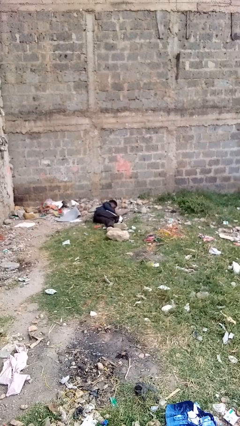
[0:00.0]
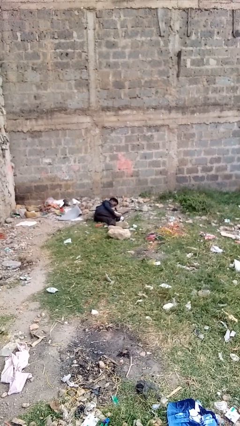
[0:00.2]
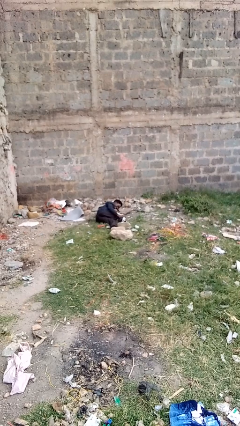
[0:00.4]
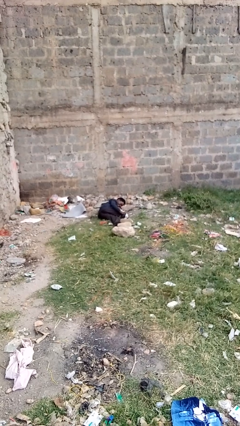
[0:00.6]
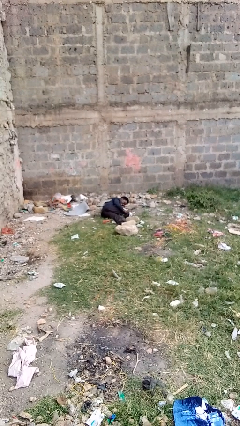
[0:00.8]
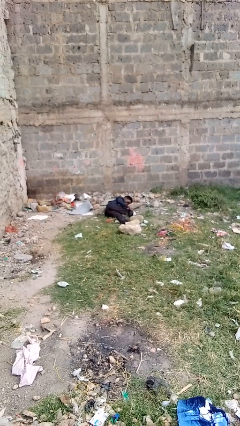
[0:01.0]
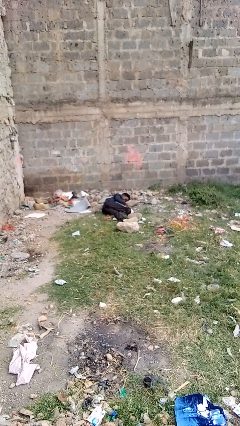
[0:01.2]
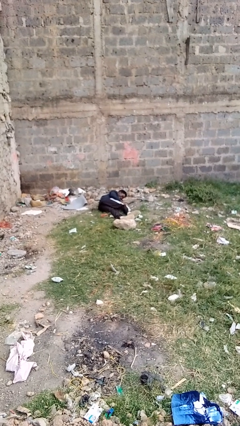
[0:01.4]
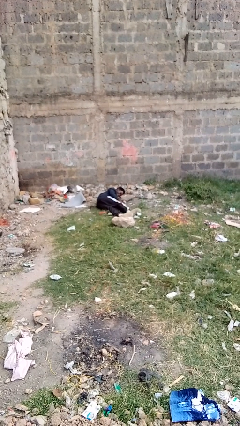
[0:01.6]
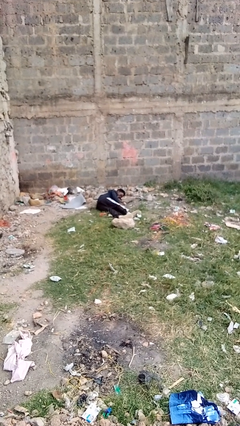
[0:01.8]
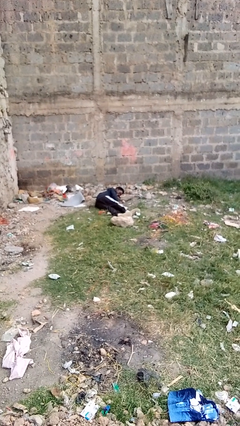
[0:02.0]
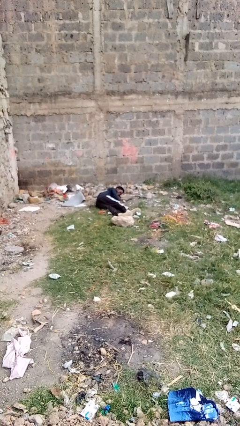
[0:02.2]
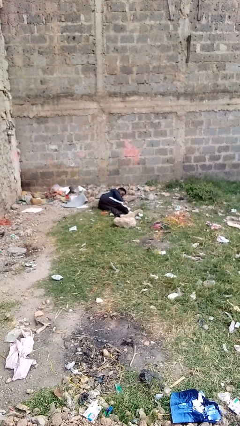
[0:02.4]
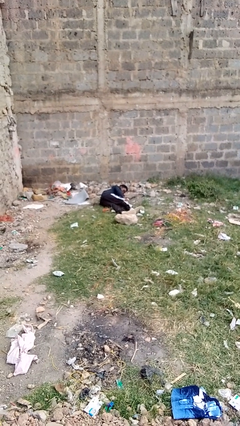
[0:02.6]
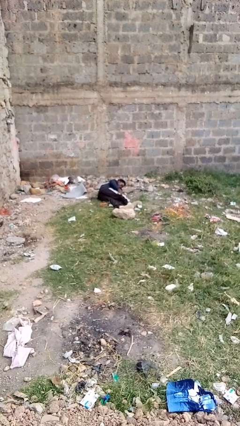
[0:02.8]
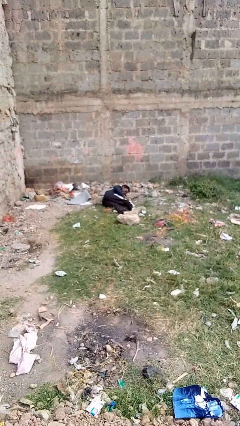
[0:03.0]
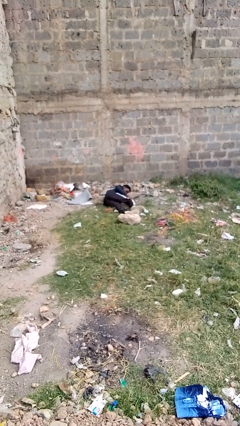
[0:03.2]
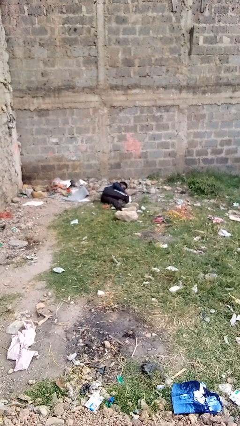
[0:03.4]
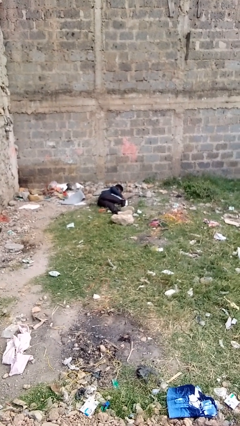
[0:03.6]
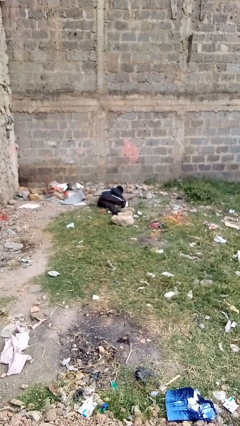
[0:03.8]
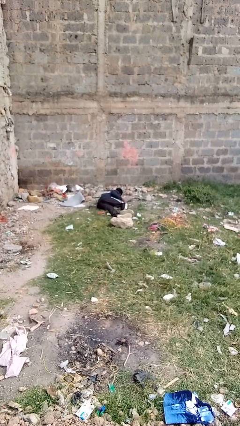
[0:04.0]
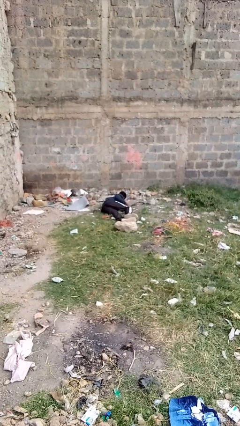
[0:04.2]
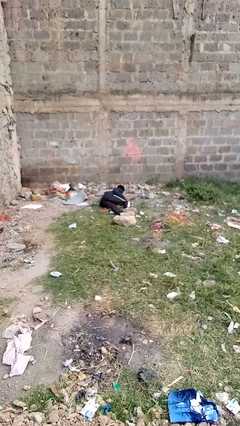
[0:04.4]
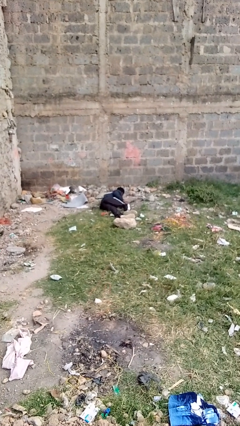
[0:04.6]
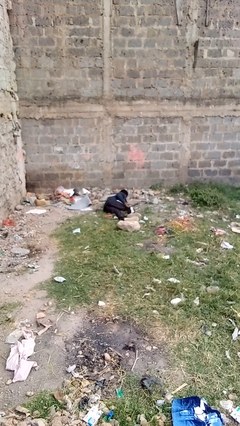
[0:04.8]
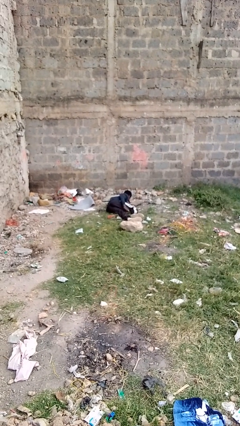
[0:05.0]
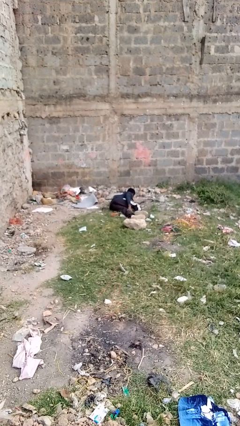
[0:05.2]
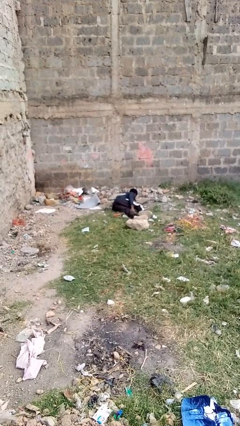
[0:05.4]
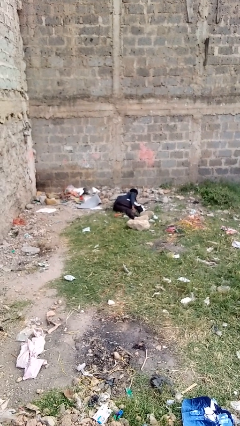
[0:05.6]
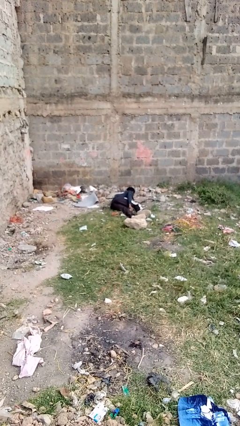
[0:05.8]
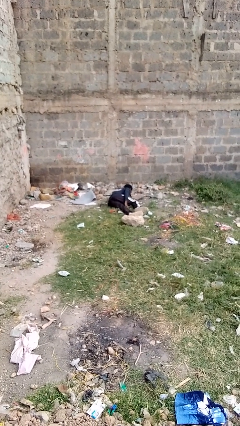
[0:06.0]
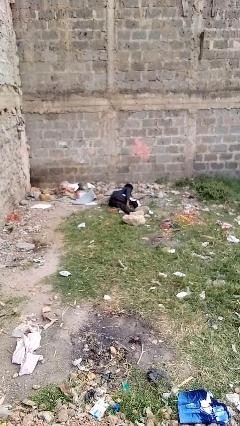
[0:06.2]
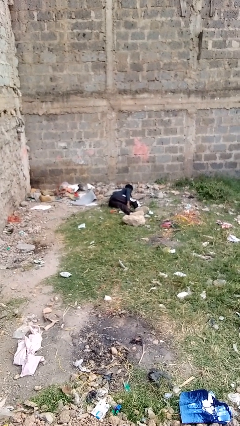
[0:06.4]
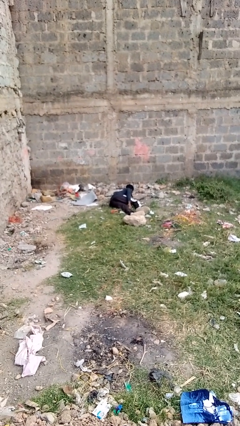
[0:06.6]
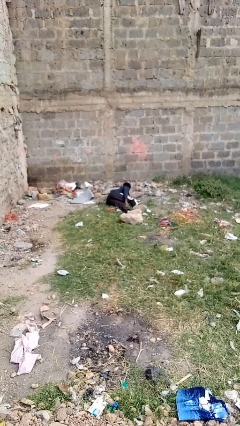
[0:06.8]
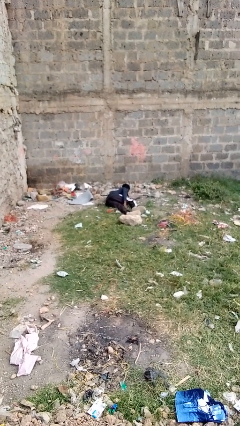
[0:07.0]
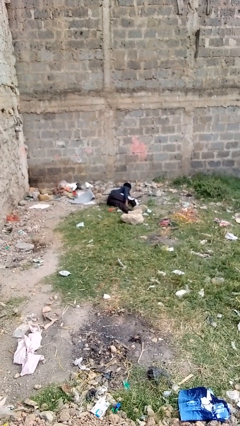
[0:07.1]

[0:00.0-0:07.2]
person lies down on floor

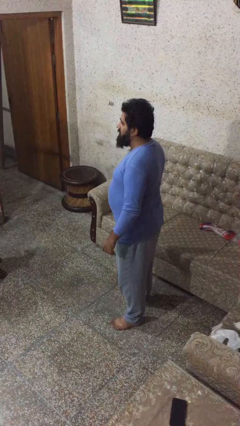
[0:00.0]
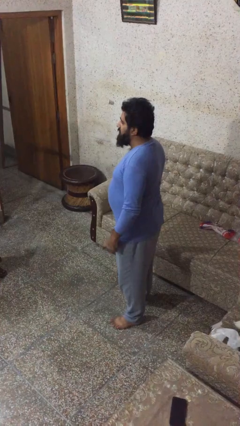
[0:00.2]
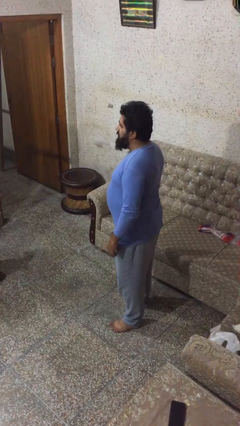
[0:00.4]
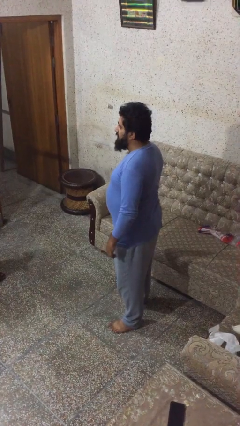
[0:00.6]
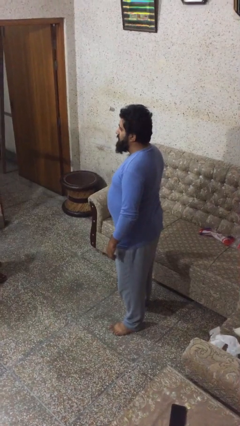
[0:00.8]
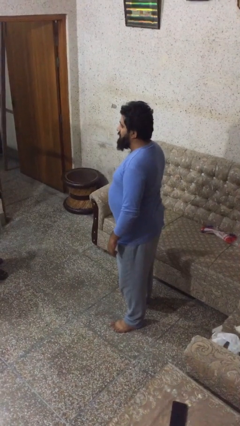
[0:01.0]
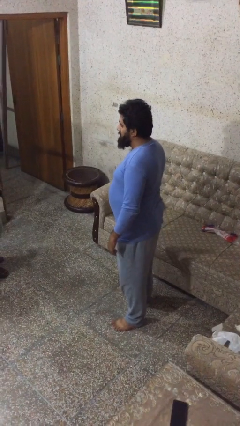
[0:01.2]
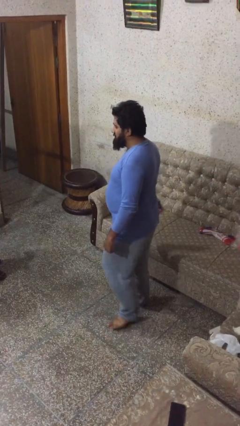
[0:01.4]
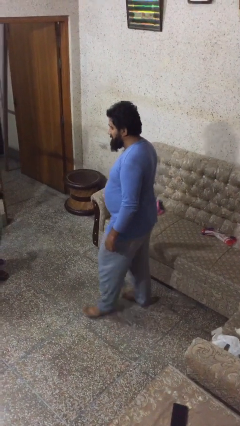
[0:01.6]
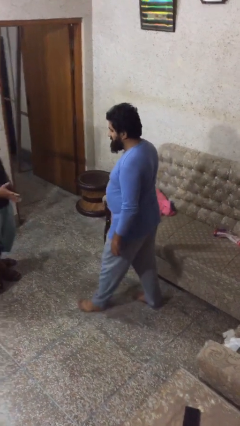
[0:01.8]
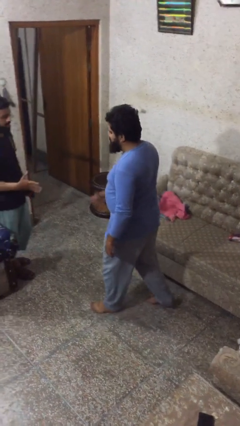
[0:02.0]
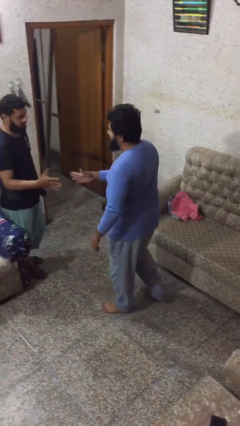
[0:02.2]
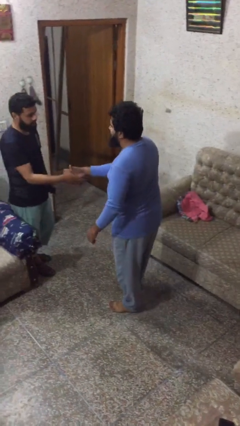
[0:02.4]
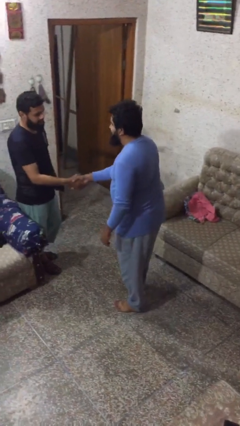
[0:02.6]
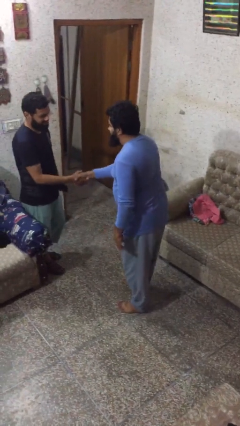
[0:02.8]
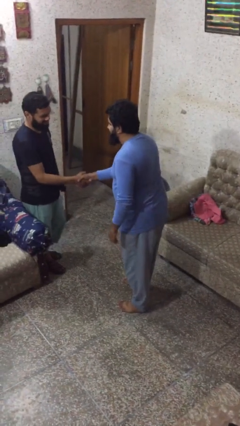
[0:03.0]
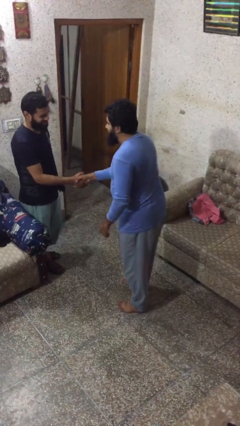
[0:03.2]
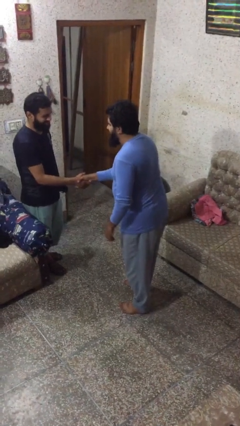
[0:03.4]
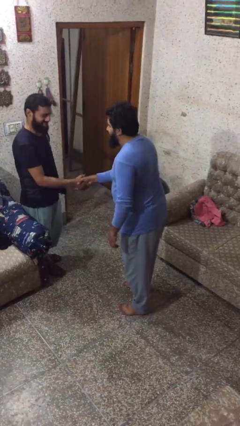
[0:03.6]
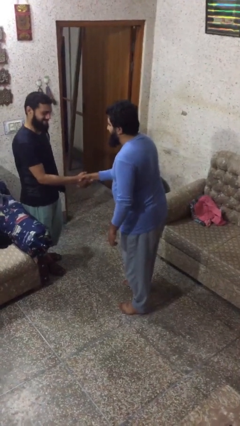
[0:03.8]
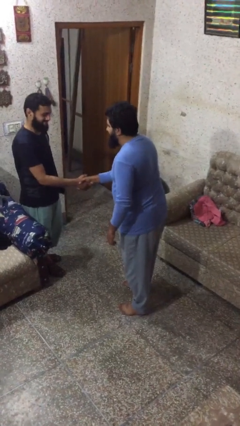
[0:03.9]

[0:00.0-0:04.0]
person shakes hand

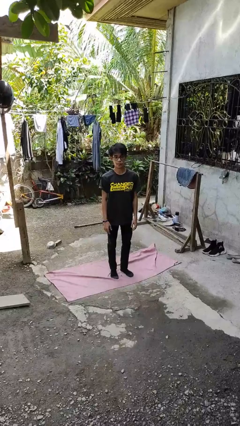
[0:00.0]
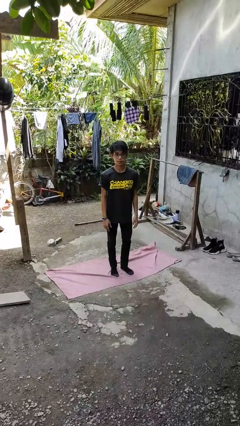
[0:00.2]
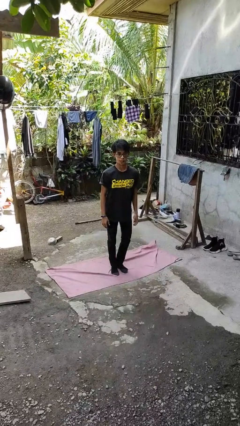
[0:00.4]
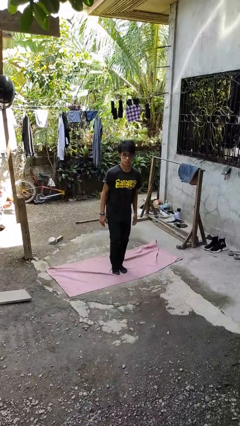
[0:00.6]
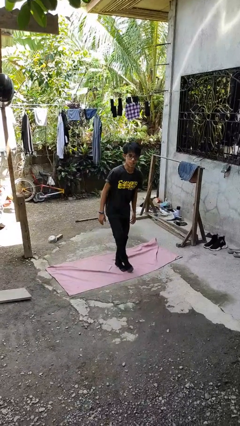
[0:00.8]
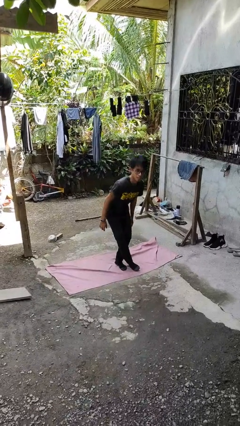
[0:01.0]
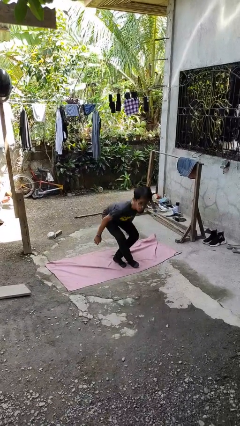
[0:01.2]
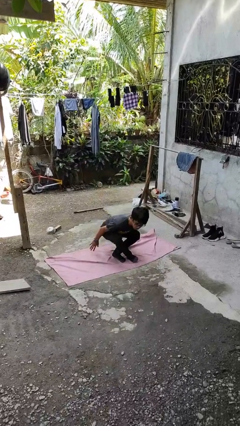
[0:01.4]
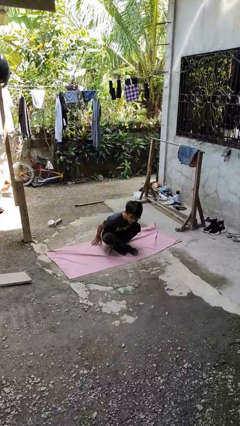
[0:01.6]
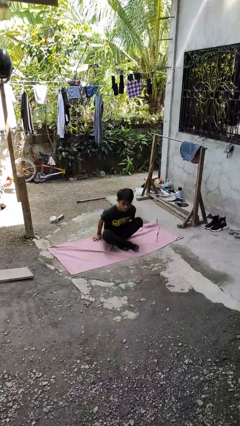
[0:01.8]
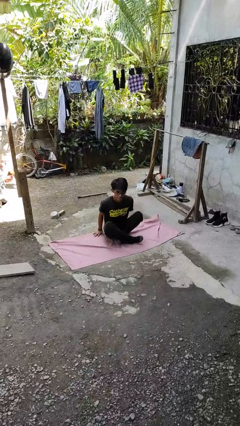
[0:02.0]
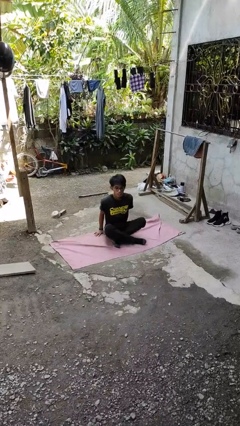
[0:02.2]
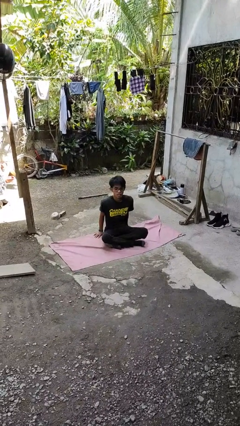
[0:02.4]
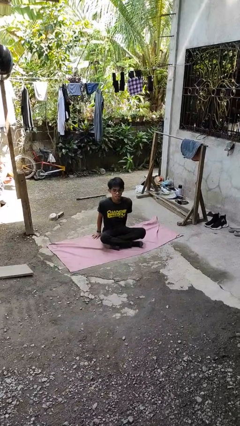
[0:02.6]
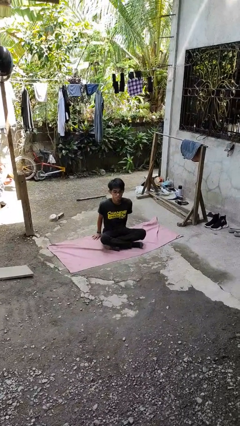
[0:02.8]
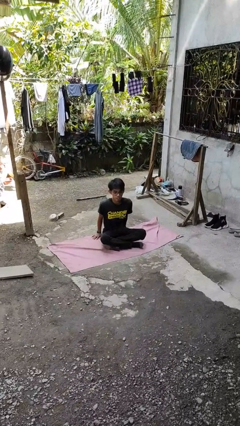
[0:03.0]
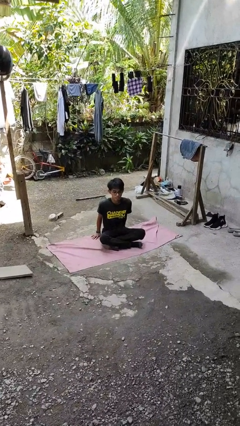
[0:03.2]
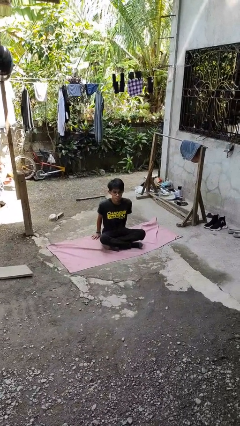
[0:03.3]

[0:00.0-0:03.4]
person sits crisscross

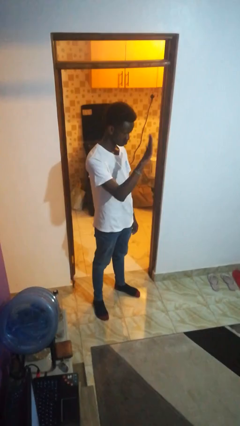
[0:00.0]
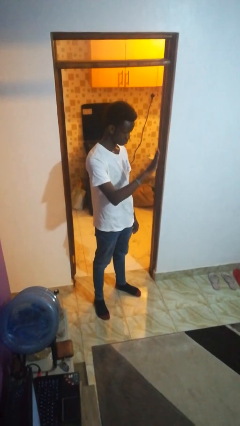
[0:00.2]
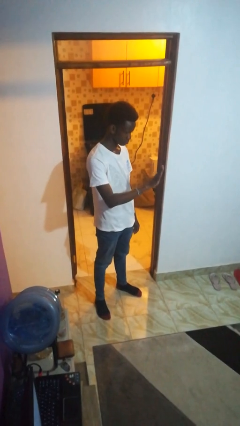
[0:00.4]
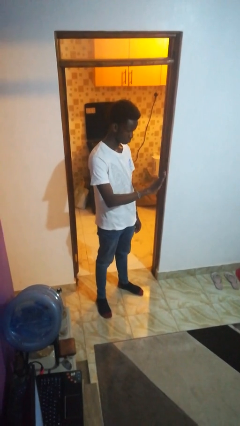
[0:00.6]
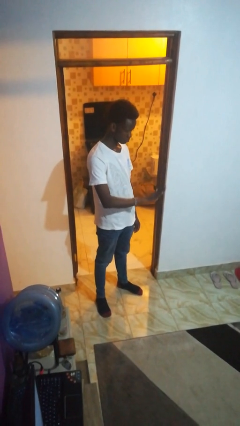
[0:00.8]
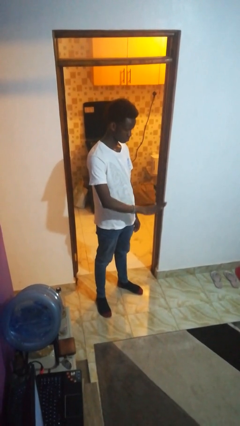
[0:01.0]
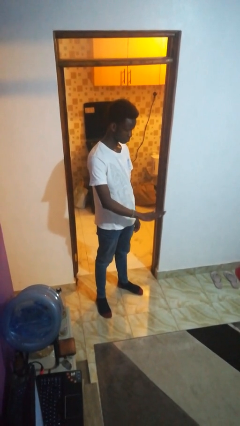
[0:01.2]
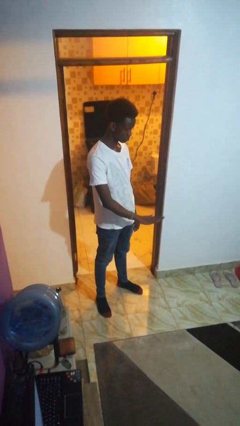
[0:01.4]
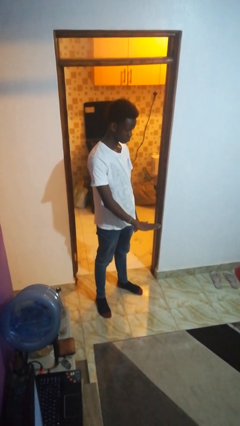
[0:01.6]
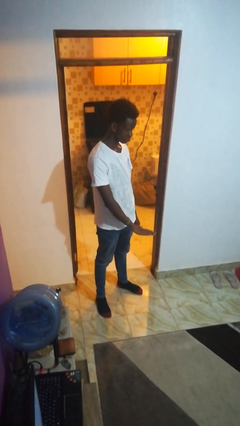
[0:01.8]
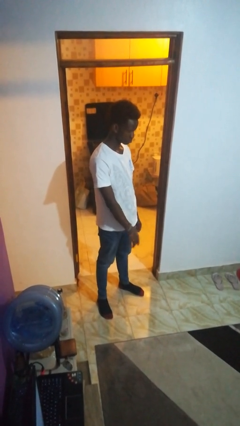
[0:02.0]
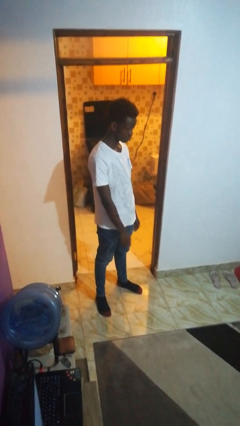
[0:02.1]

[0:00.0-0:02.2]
person gestures swipe down

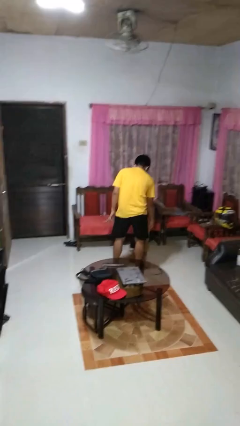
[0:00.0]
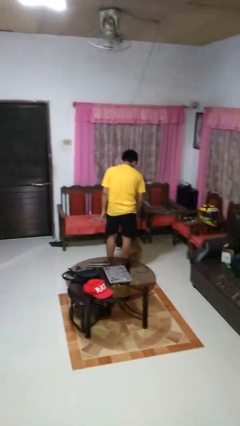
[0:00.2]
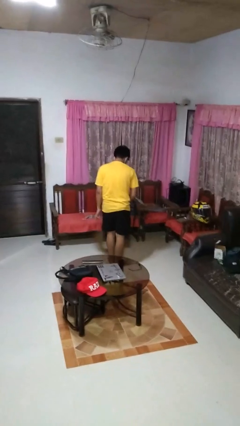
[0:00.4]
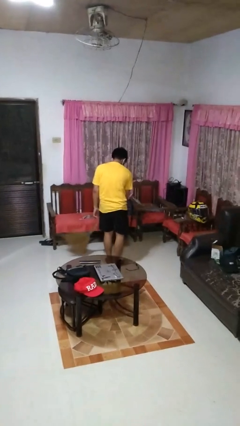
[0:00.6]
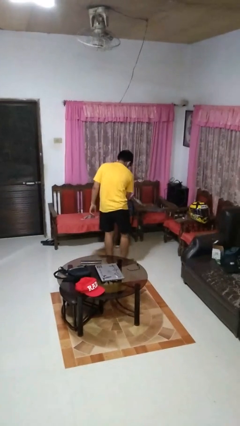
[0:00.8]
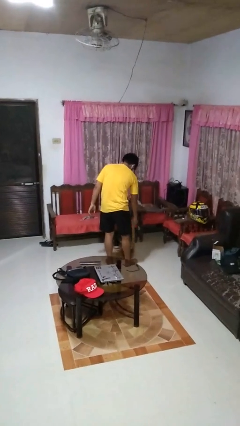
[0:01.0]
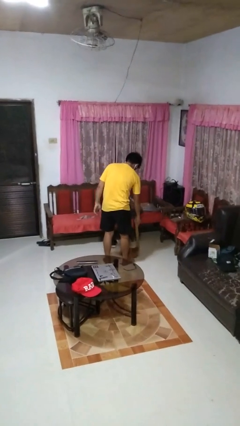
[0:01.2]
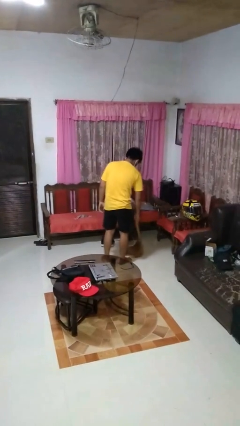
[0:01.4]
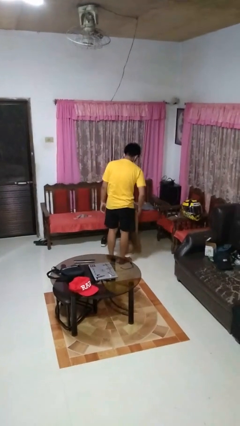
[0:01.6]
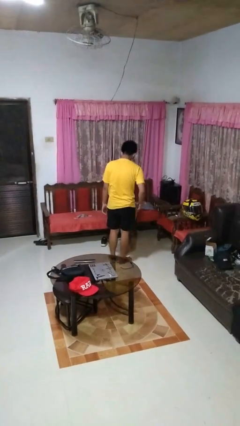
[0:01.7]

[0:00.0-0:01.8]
person sweeps floor
